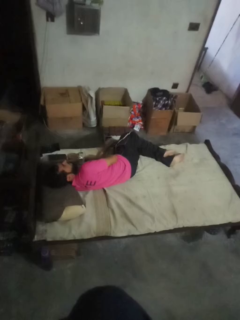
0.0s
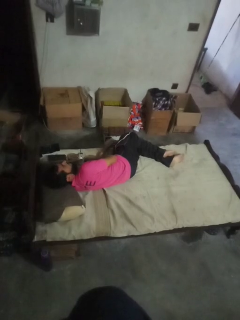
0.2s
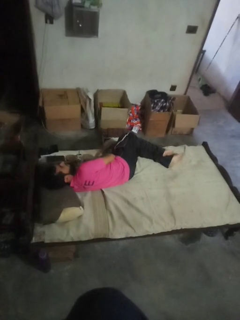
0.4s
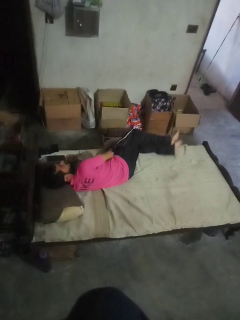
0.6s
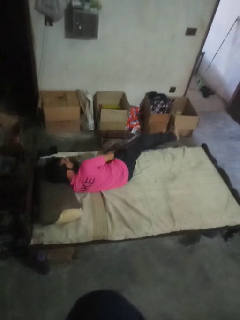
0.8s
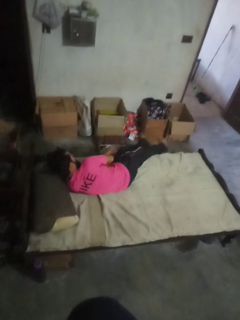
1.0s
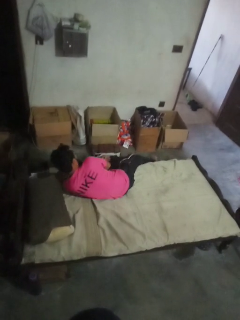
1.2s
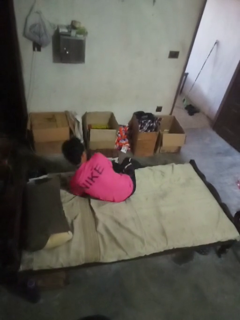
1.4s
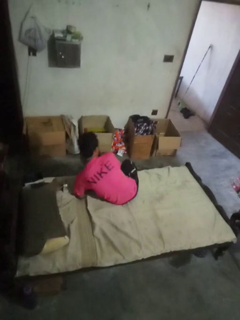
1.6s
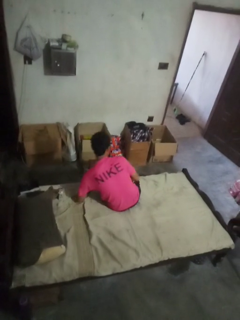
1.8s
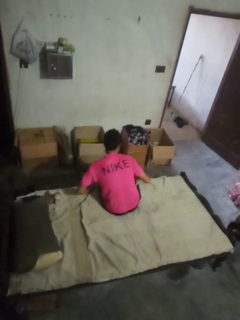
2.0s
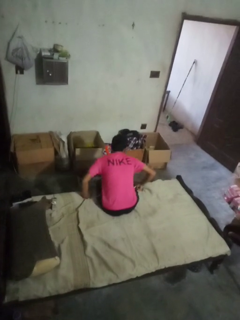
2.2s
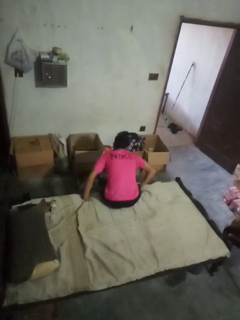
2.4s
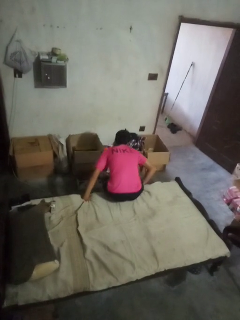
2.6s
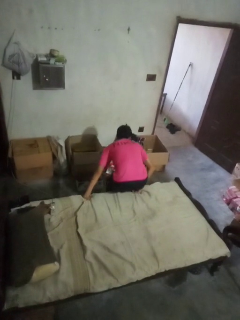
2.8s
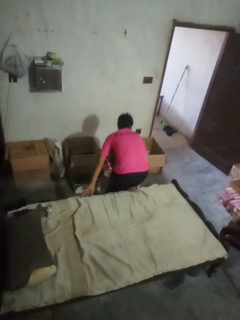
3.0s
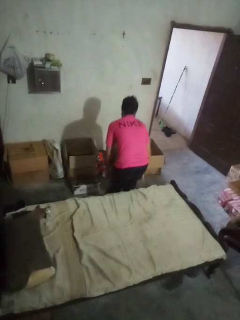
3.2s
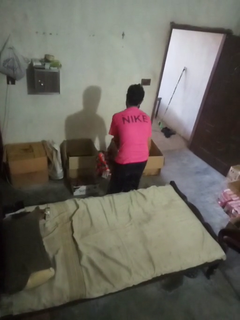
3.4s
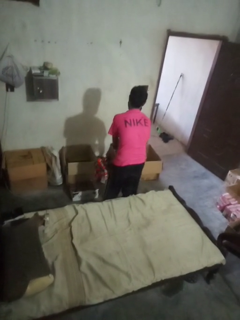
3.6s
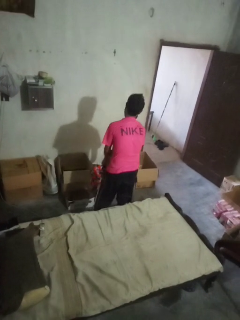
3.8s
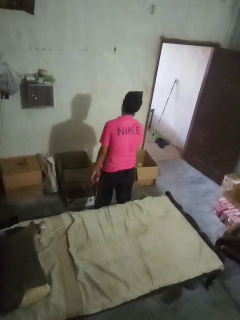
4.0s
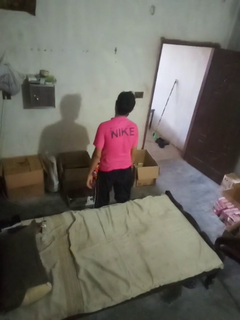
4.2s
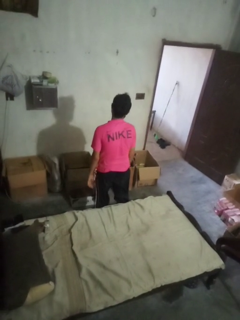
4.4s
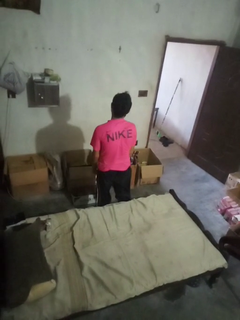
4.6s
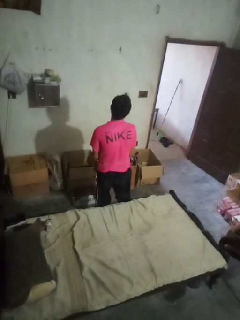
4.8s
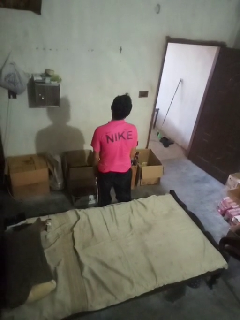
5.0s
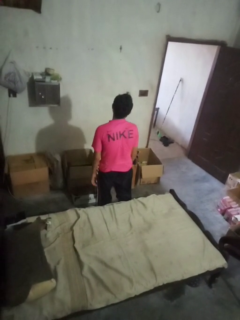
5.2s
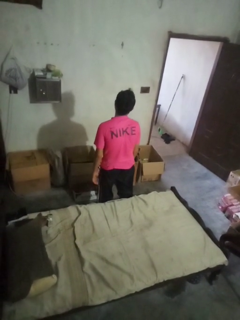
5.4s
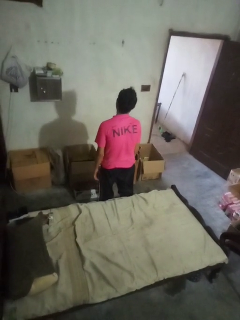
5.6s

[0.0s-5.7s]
person stands up

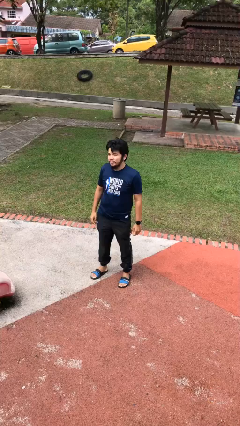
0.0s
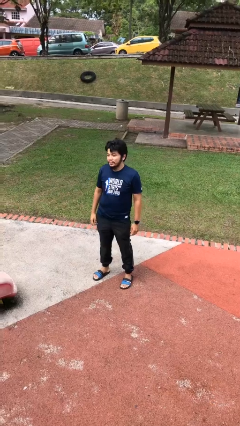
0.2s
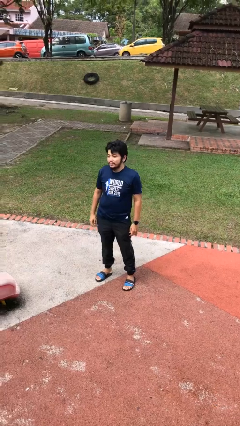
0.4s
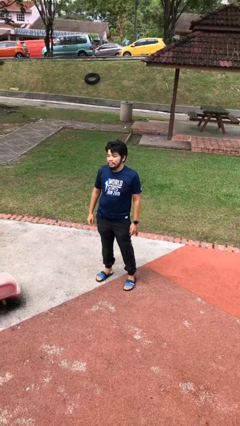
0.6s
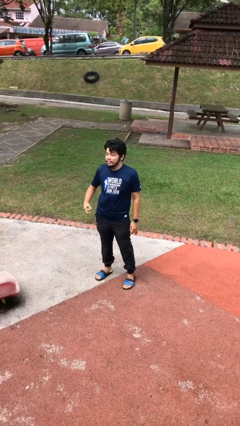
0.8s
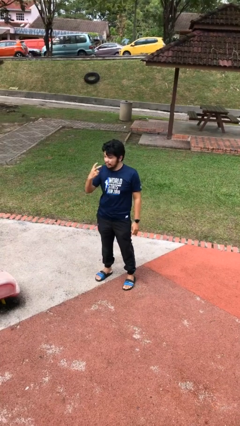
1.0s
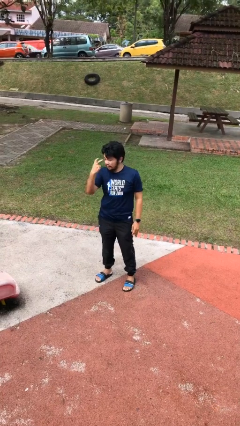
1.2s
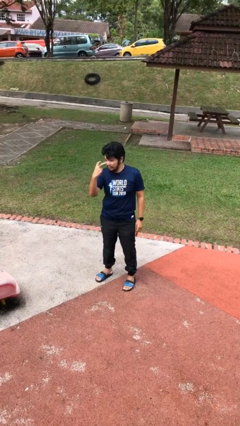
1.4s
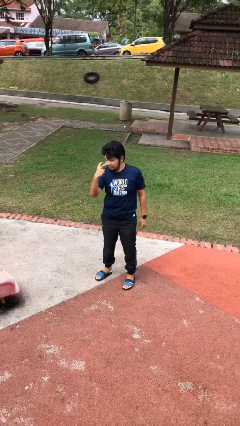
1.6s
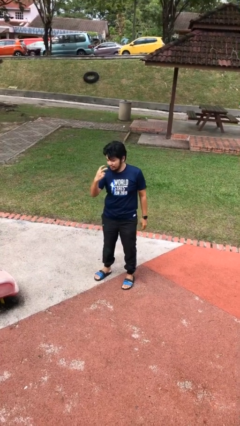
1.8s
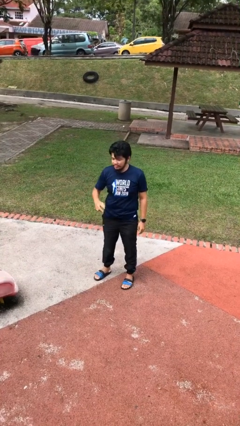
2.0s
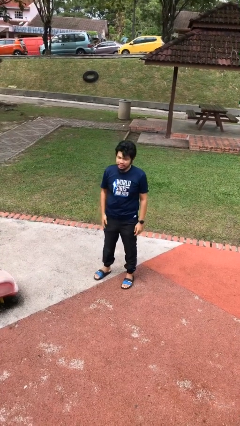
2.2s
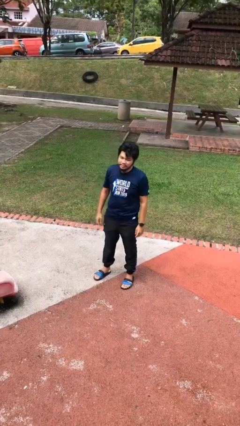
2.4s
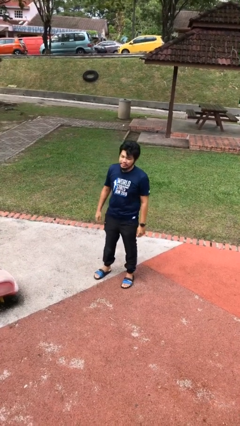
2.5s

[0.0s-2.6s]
person gestures watch closely

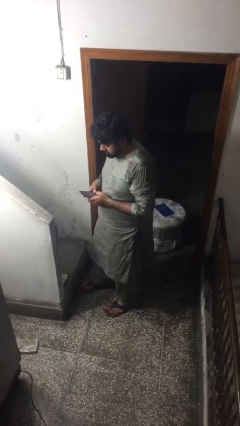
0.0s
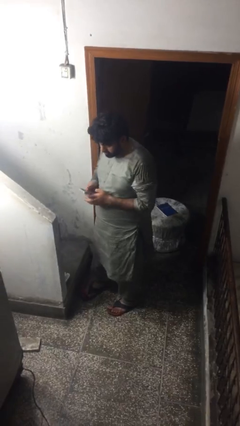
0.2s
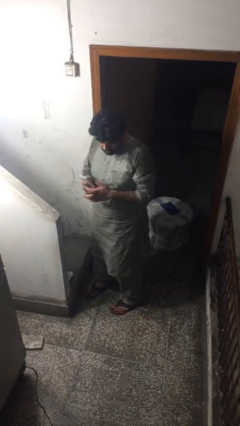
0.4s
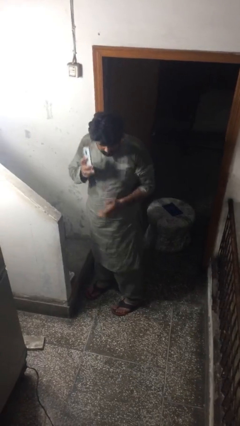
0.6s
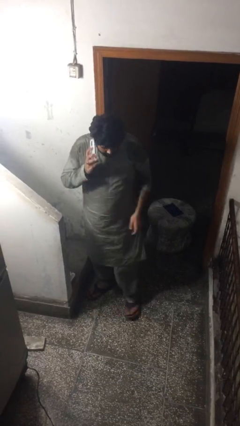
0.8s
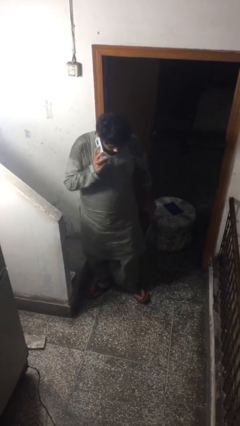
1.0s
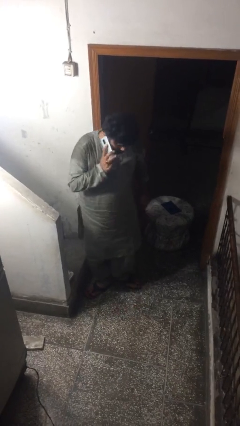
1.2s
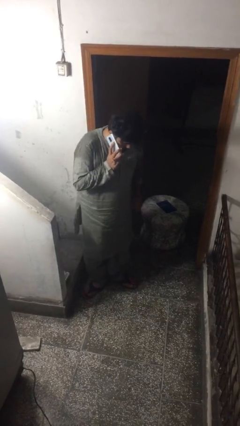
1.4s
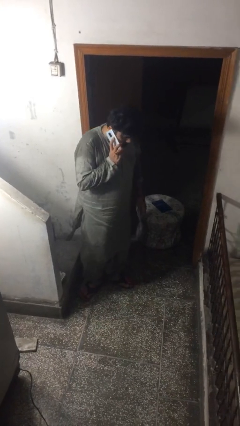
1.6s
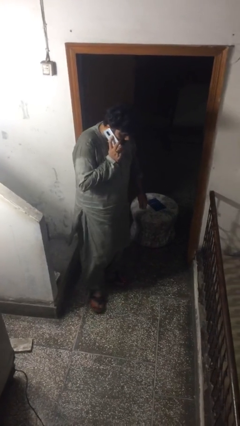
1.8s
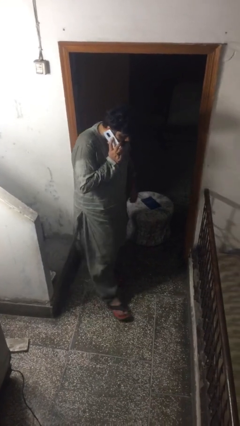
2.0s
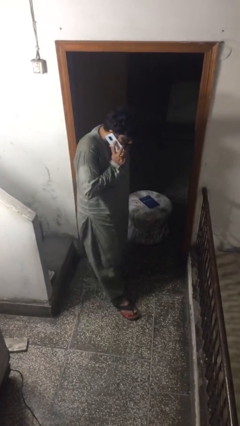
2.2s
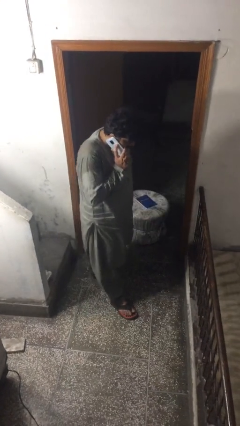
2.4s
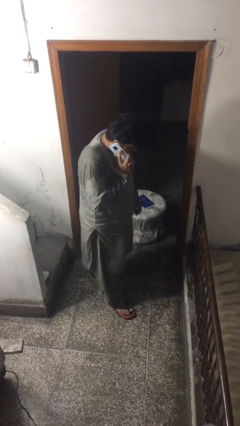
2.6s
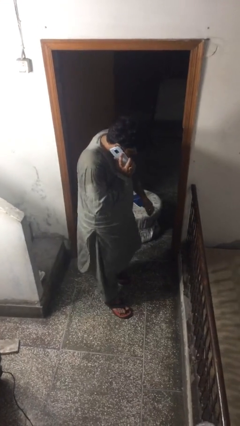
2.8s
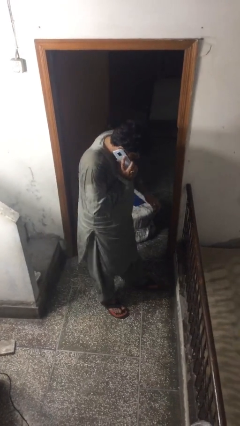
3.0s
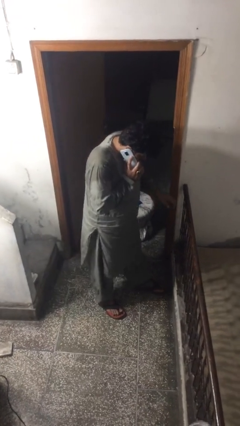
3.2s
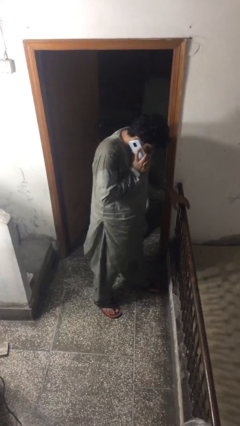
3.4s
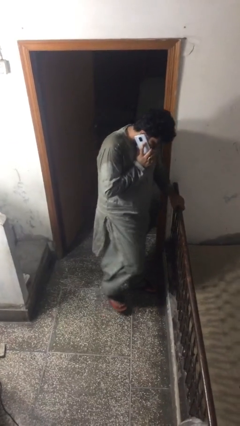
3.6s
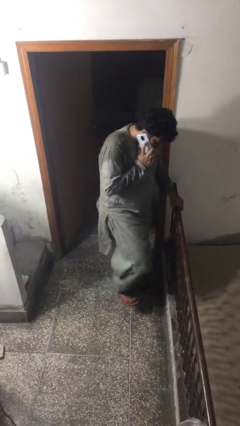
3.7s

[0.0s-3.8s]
person talks on phone

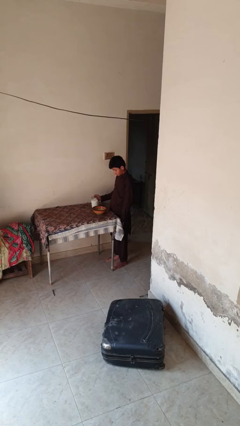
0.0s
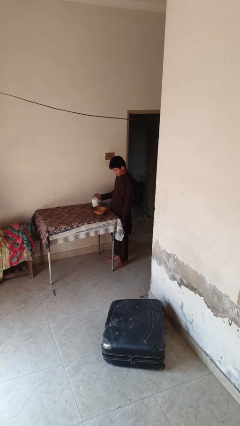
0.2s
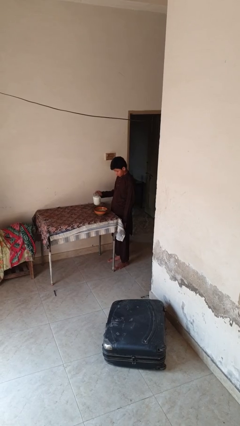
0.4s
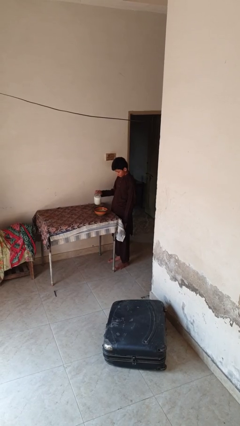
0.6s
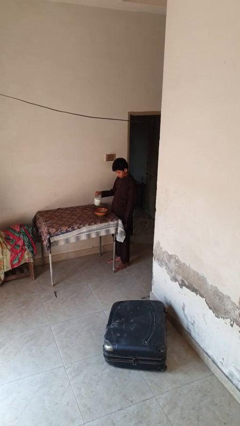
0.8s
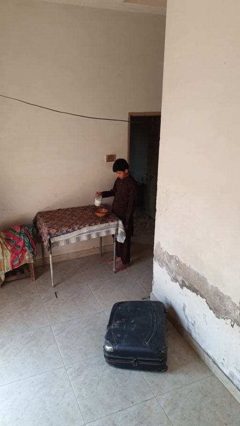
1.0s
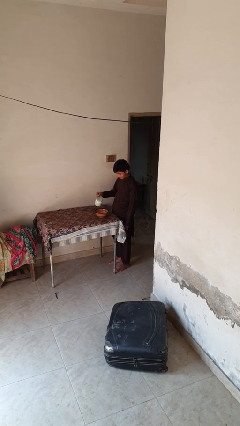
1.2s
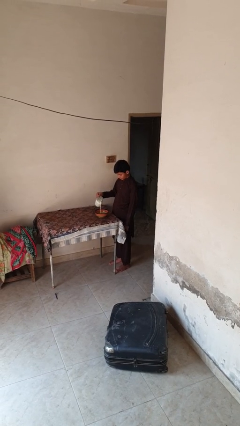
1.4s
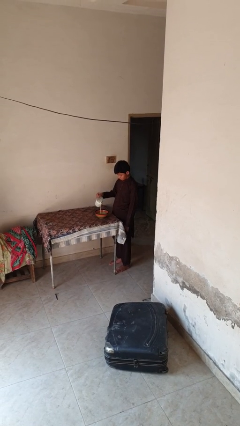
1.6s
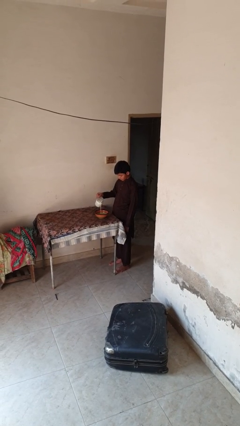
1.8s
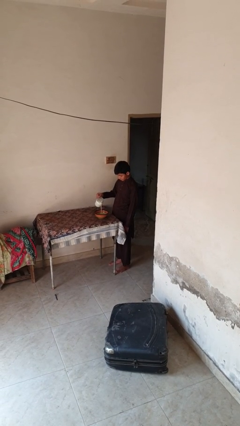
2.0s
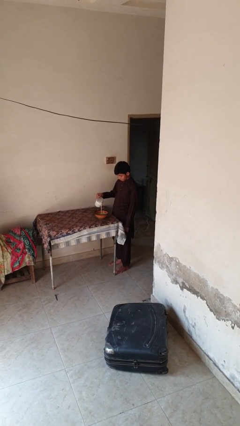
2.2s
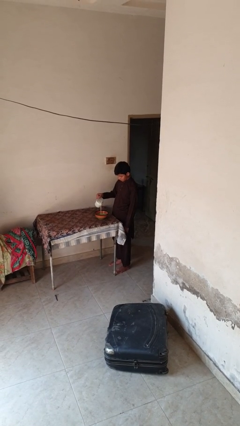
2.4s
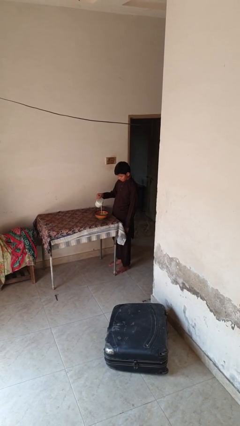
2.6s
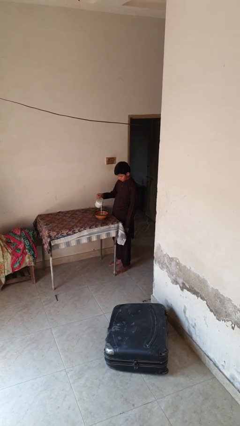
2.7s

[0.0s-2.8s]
person pours into bowl

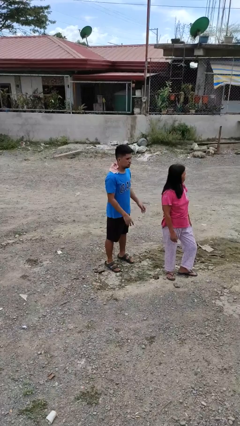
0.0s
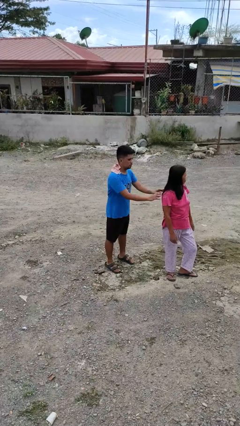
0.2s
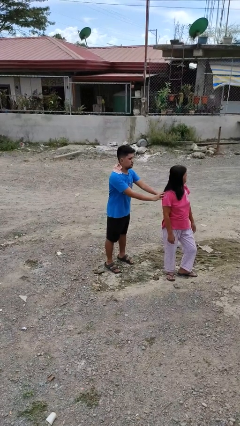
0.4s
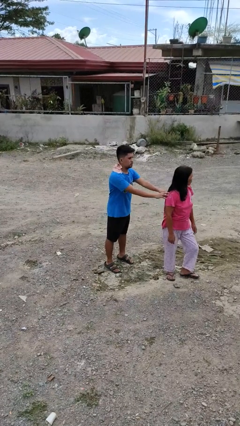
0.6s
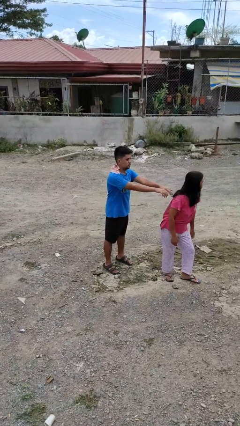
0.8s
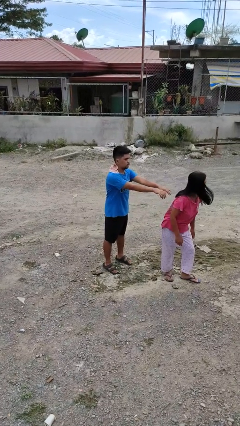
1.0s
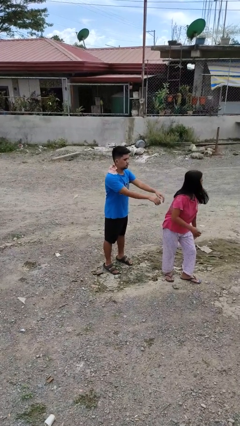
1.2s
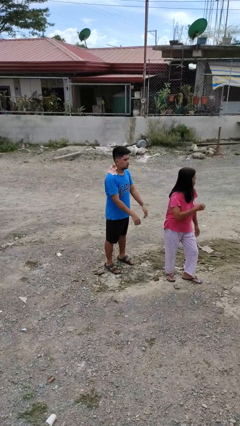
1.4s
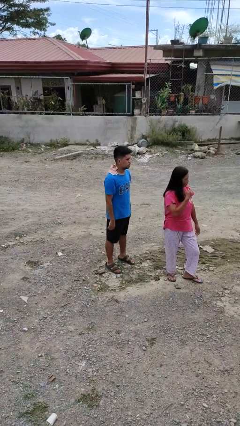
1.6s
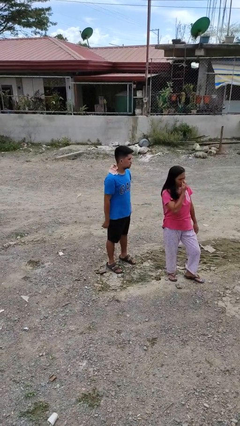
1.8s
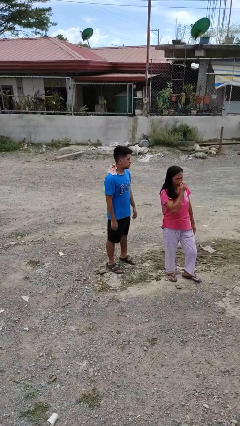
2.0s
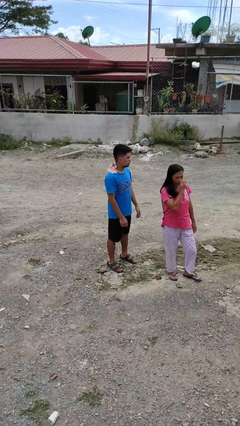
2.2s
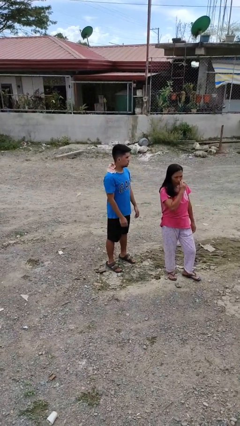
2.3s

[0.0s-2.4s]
person shoves person

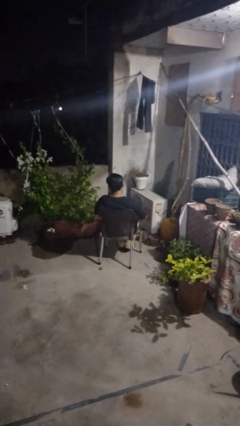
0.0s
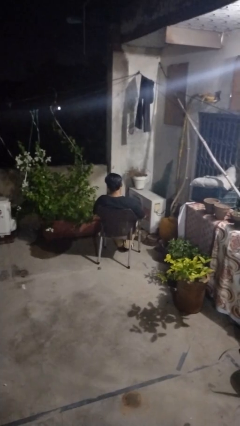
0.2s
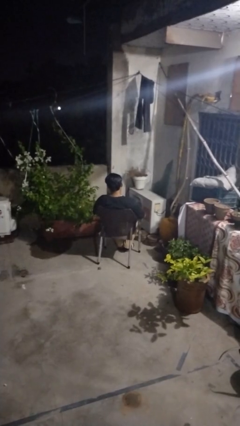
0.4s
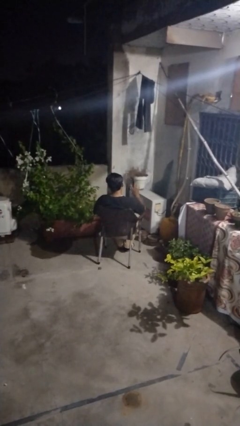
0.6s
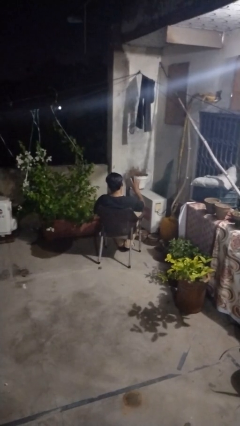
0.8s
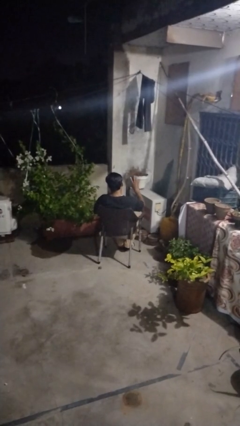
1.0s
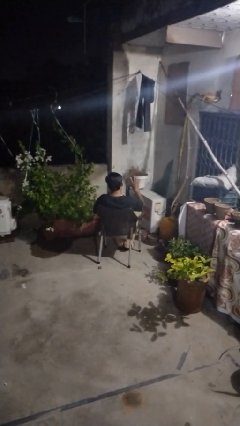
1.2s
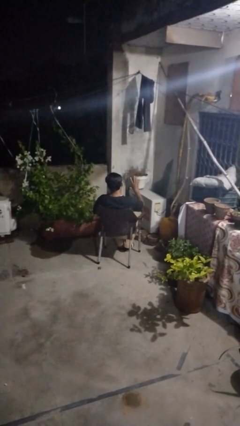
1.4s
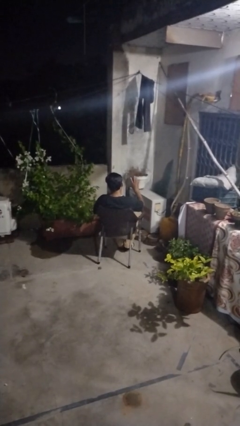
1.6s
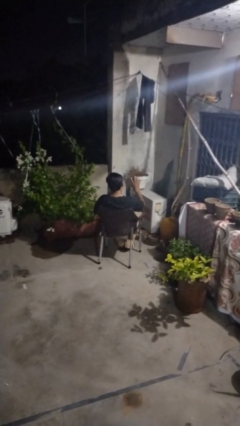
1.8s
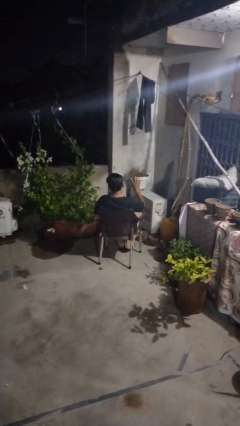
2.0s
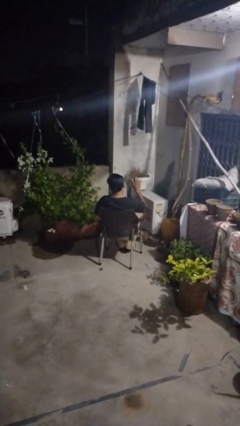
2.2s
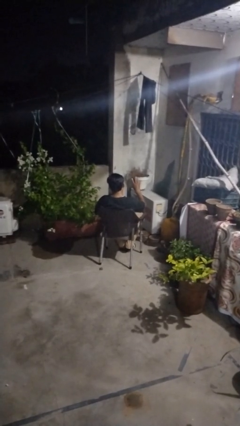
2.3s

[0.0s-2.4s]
person gestures number four
